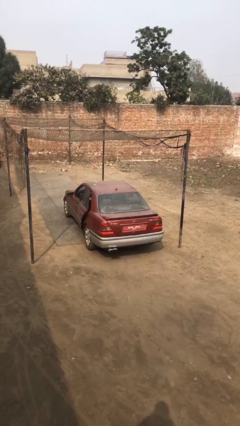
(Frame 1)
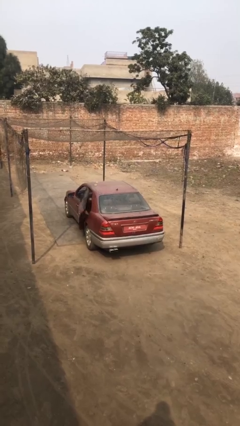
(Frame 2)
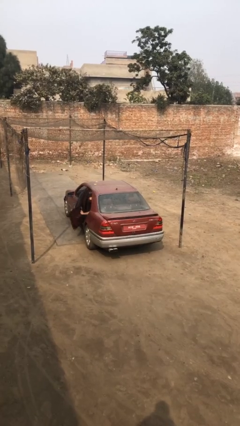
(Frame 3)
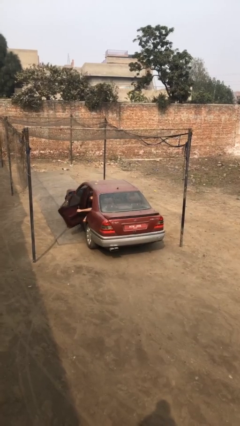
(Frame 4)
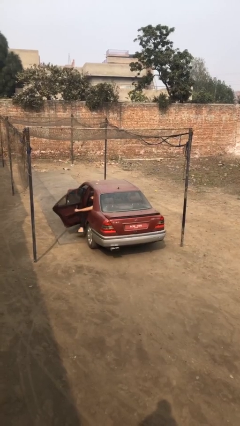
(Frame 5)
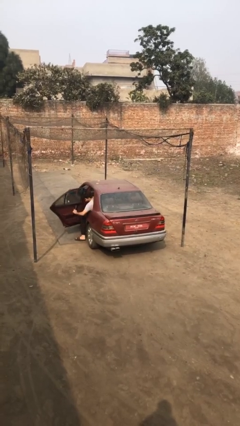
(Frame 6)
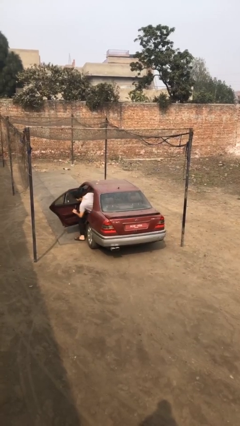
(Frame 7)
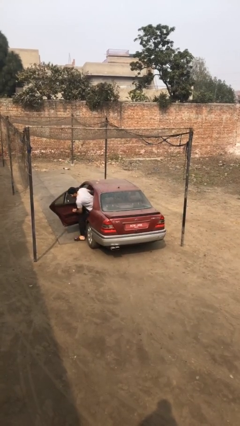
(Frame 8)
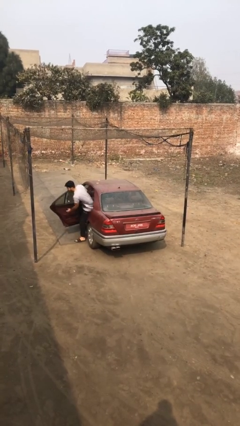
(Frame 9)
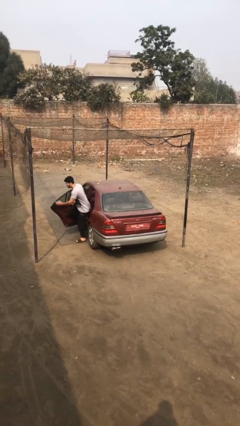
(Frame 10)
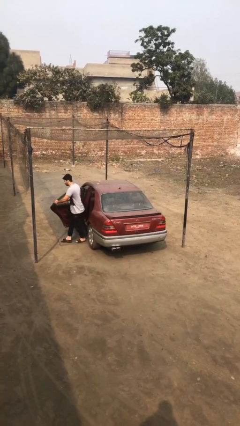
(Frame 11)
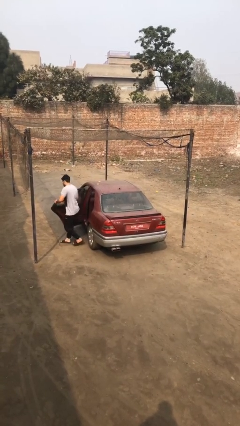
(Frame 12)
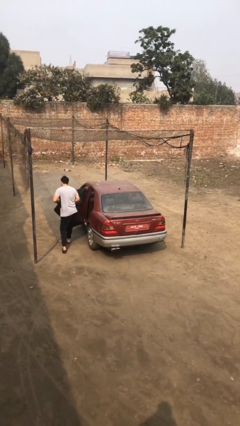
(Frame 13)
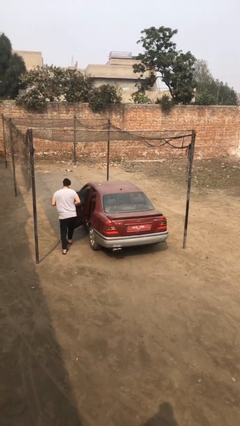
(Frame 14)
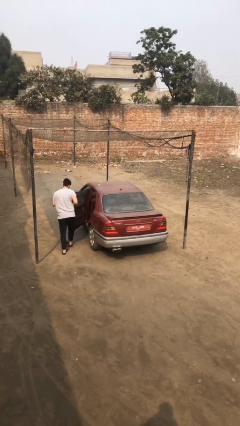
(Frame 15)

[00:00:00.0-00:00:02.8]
car drops off person

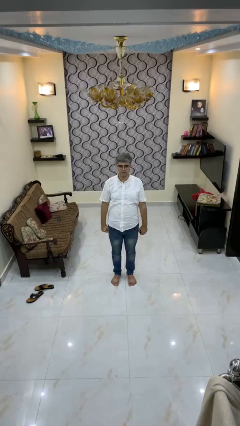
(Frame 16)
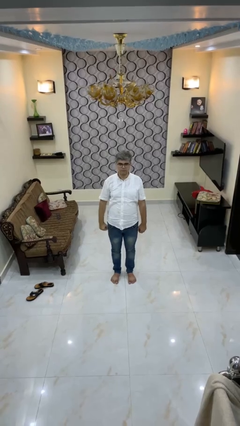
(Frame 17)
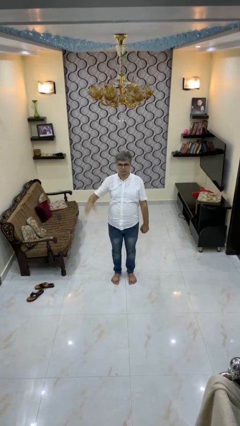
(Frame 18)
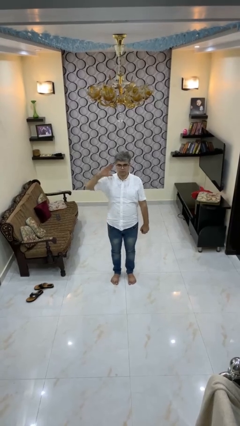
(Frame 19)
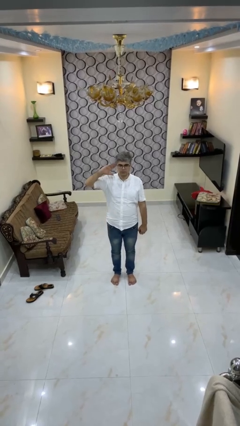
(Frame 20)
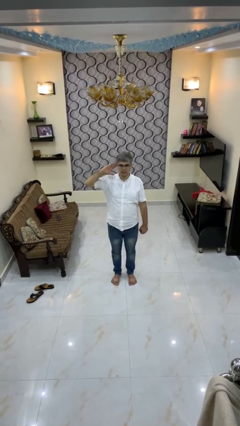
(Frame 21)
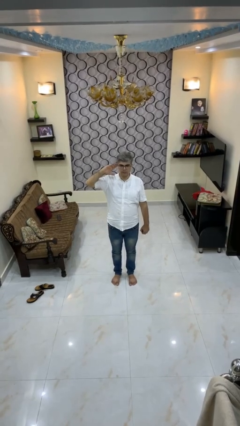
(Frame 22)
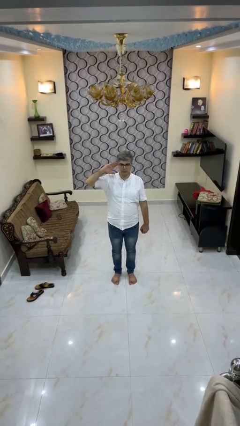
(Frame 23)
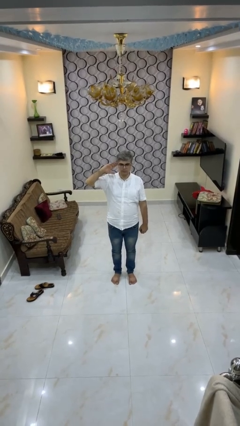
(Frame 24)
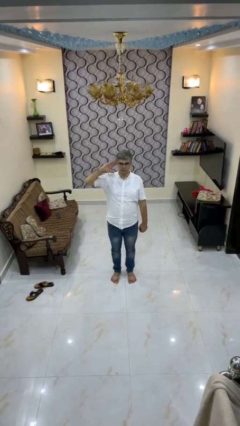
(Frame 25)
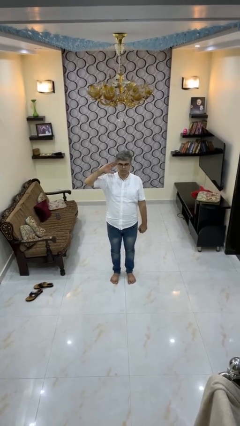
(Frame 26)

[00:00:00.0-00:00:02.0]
person salutes

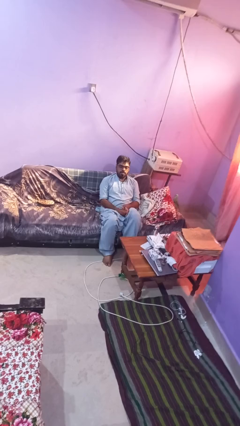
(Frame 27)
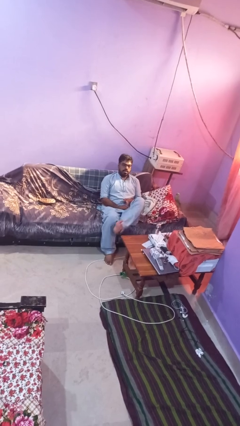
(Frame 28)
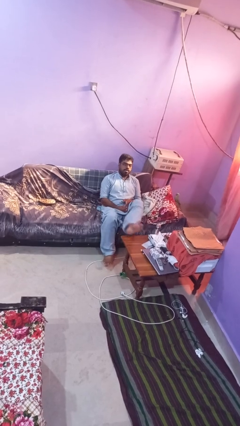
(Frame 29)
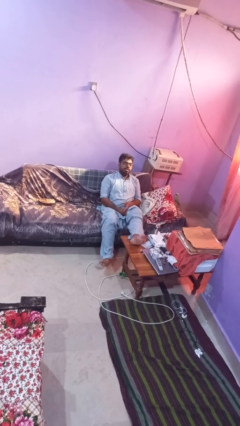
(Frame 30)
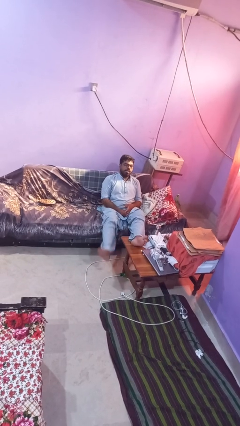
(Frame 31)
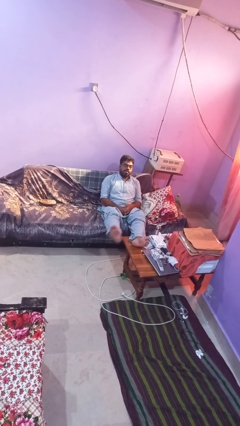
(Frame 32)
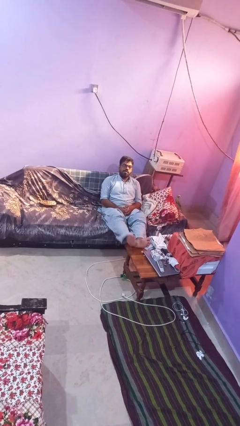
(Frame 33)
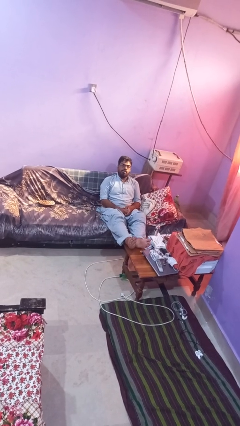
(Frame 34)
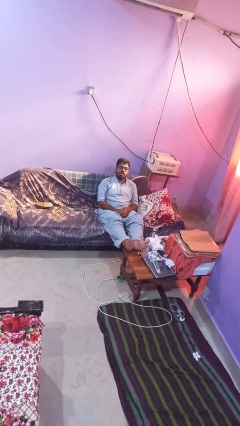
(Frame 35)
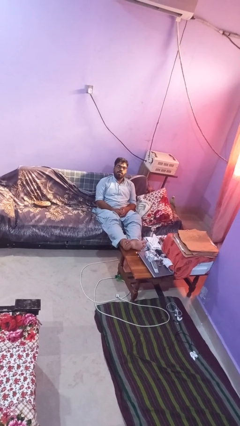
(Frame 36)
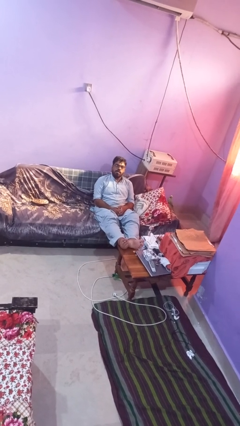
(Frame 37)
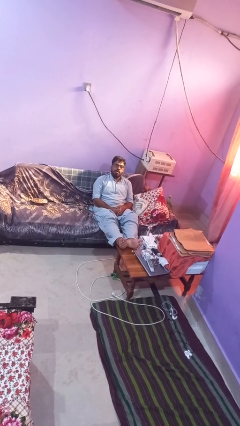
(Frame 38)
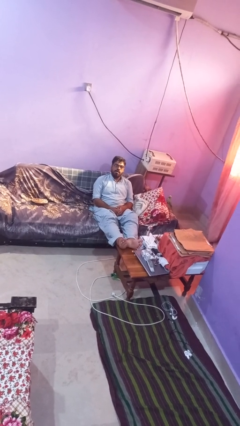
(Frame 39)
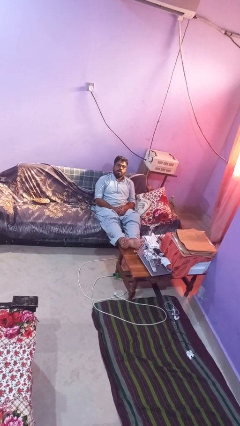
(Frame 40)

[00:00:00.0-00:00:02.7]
person puts feet up

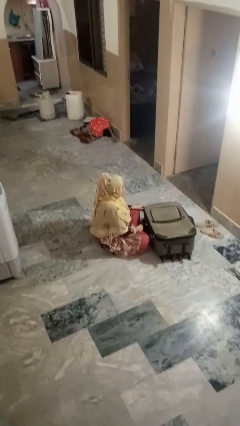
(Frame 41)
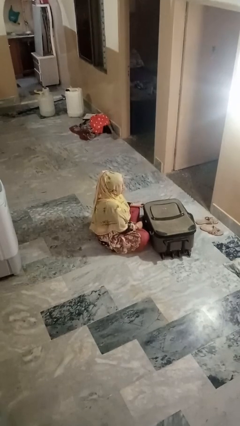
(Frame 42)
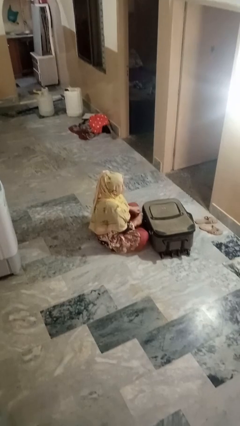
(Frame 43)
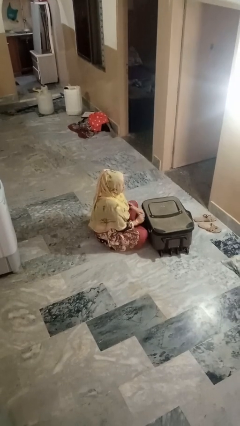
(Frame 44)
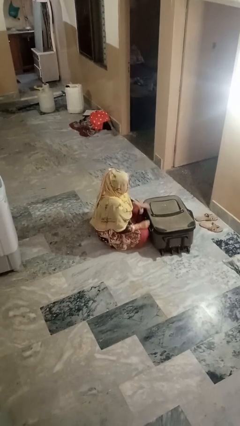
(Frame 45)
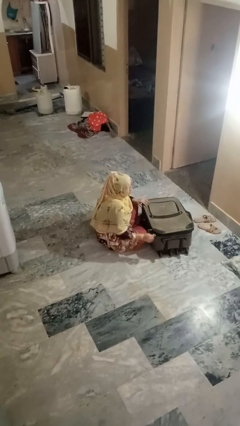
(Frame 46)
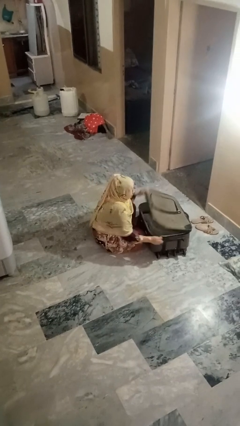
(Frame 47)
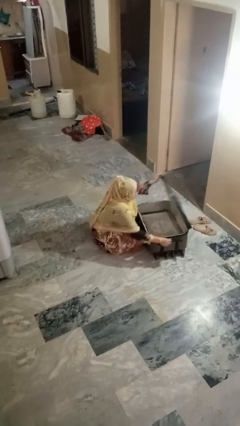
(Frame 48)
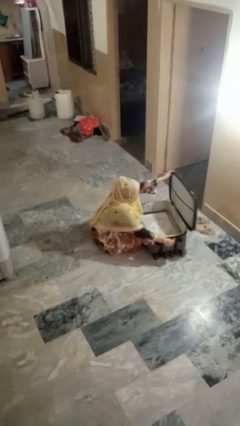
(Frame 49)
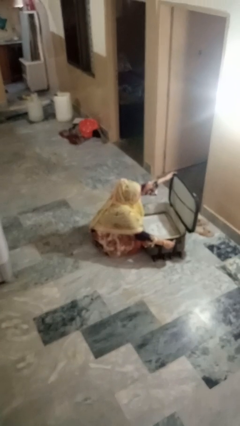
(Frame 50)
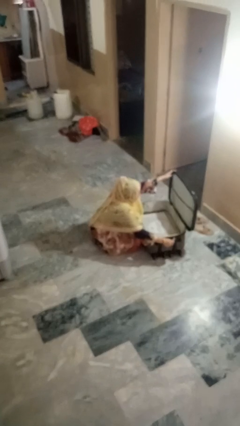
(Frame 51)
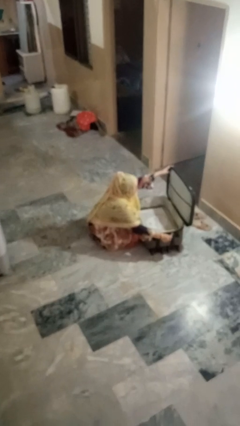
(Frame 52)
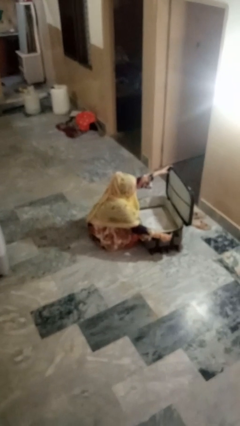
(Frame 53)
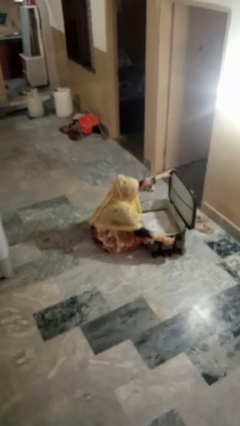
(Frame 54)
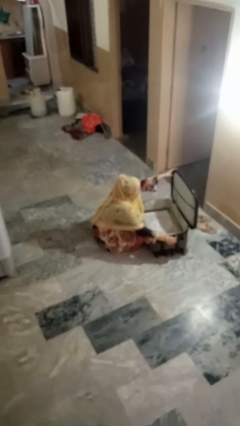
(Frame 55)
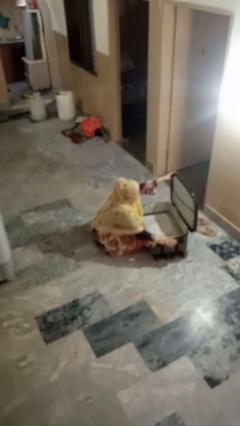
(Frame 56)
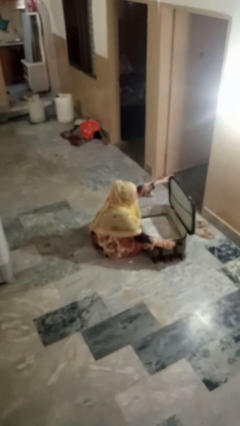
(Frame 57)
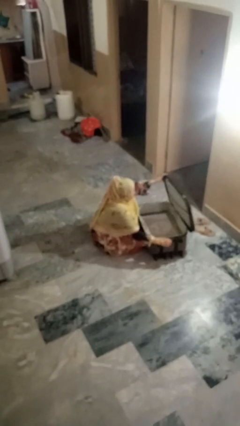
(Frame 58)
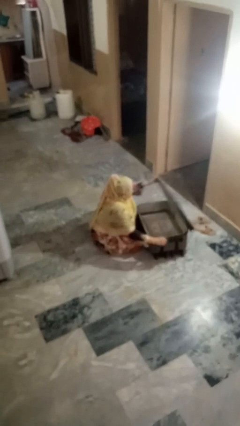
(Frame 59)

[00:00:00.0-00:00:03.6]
person opens suitcase

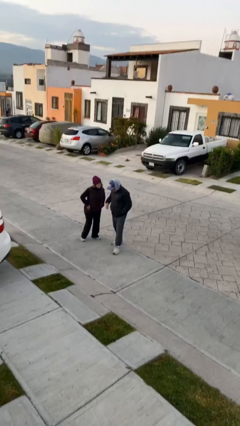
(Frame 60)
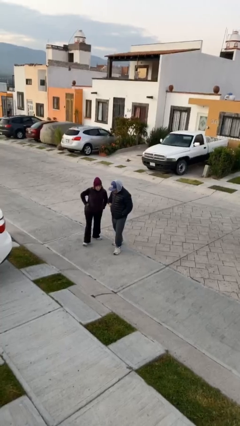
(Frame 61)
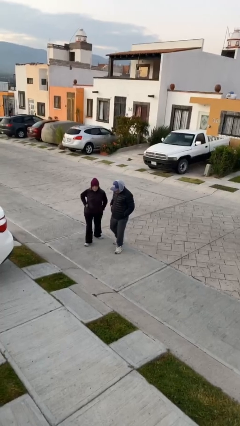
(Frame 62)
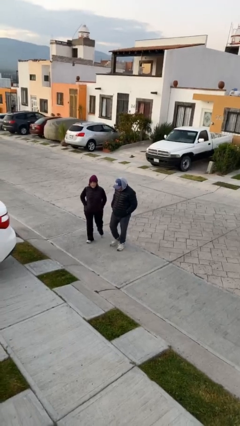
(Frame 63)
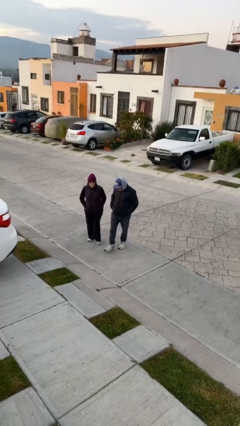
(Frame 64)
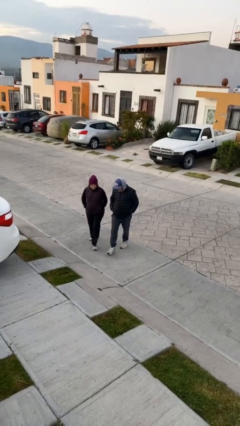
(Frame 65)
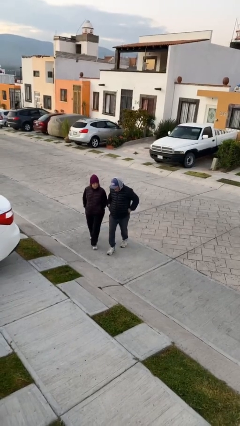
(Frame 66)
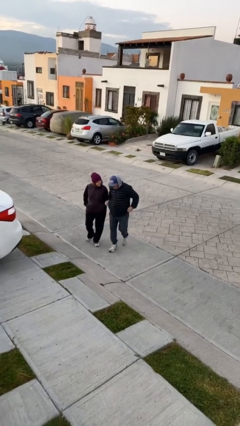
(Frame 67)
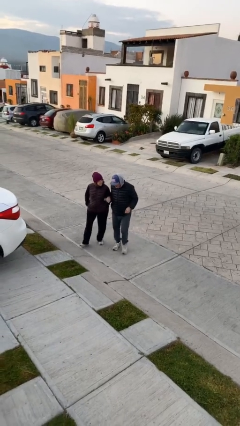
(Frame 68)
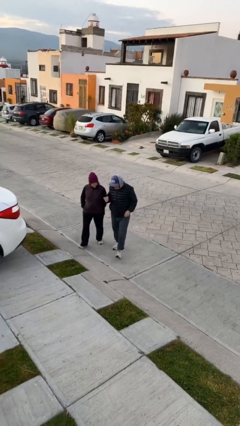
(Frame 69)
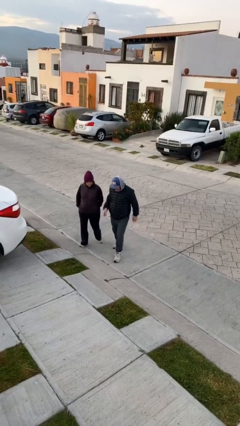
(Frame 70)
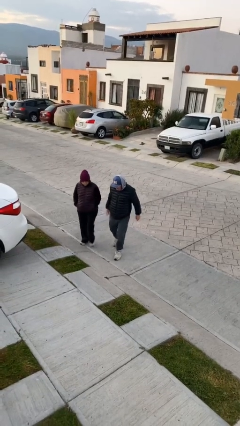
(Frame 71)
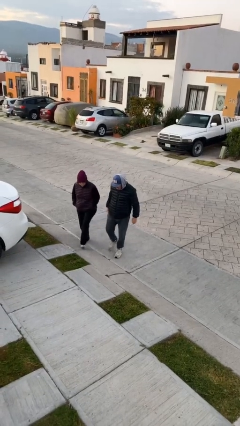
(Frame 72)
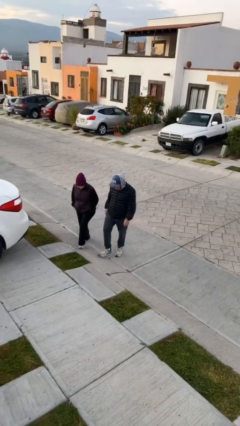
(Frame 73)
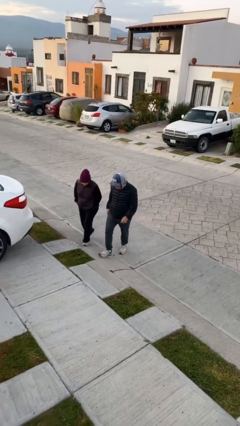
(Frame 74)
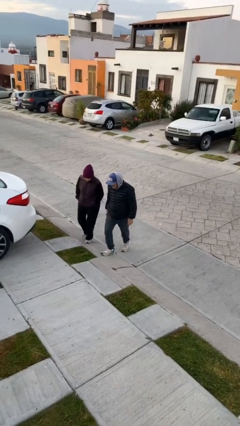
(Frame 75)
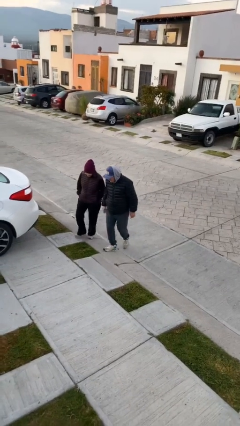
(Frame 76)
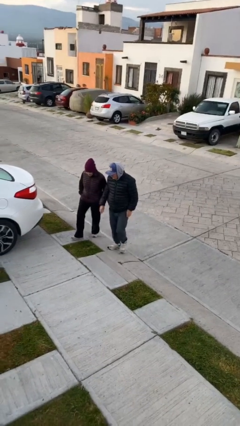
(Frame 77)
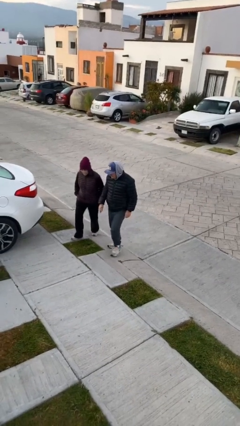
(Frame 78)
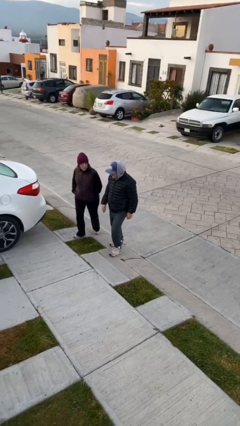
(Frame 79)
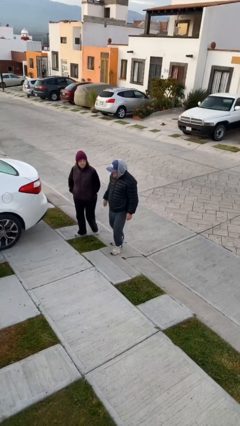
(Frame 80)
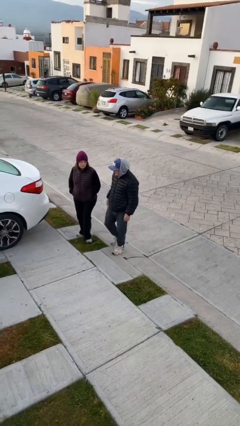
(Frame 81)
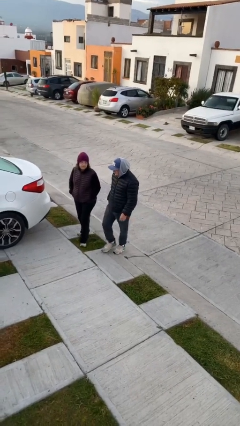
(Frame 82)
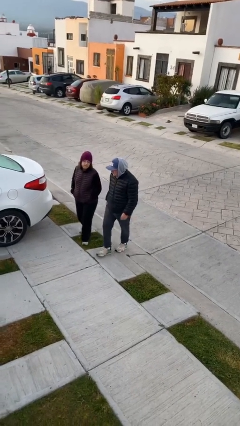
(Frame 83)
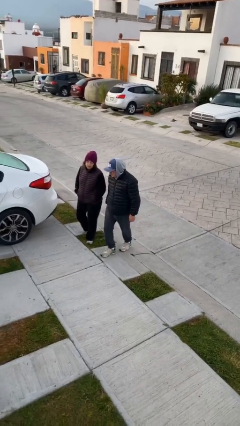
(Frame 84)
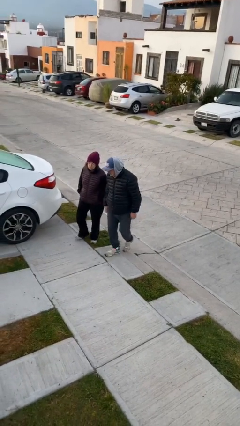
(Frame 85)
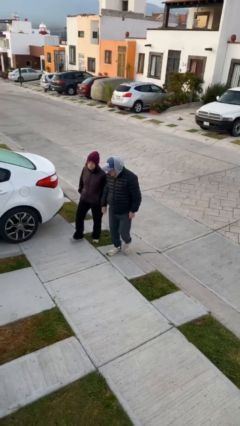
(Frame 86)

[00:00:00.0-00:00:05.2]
person talks to person

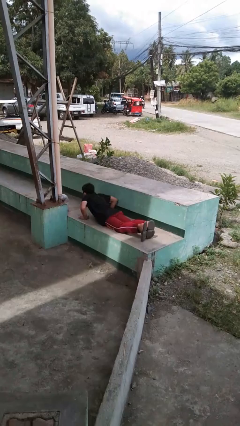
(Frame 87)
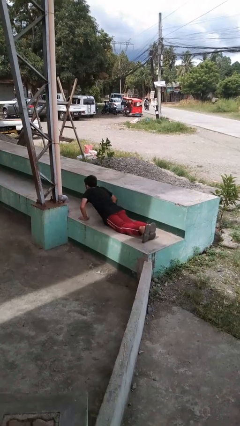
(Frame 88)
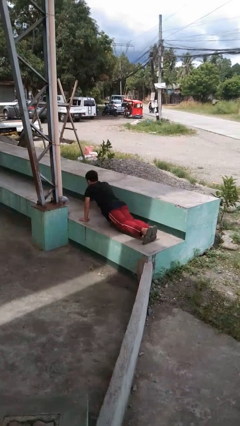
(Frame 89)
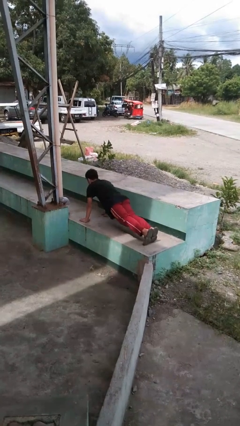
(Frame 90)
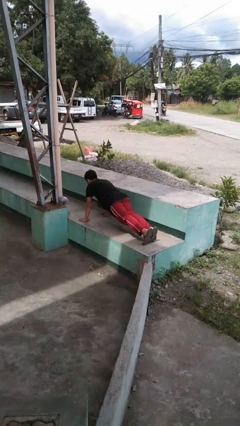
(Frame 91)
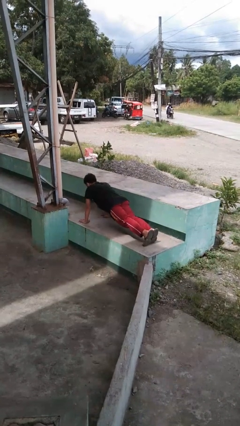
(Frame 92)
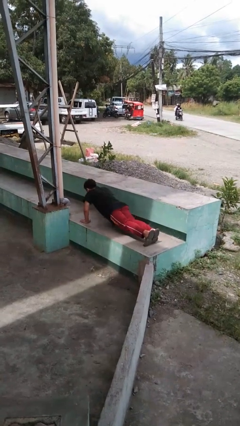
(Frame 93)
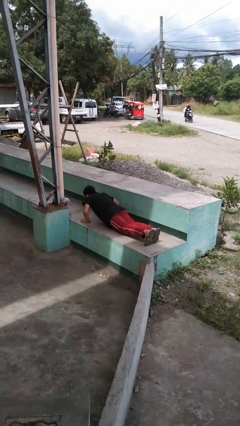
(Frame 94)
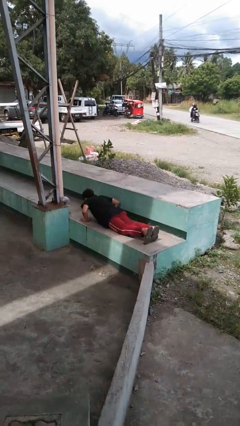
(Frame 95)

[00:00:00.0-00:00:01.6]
person exercises with pushup
